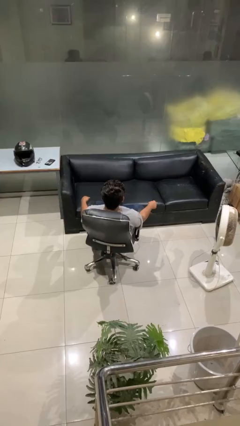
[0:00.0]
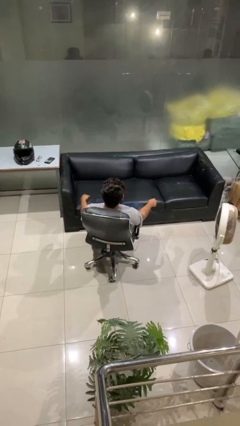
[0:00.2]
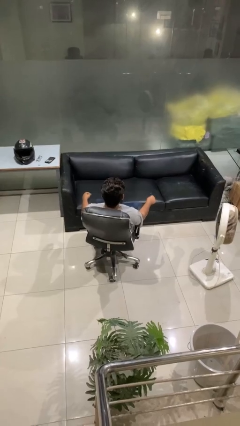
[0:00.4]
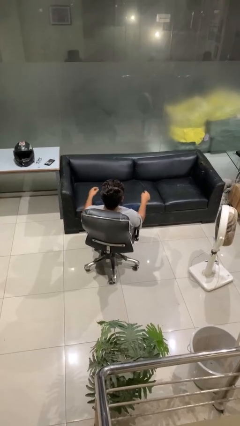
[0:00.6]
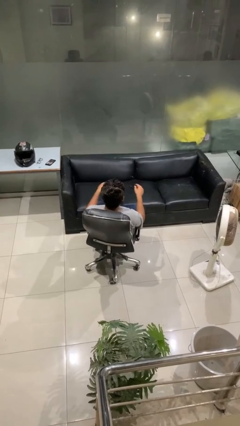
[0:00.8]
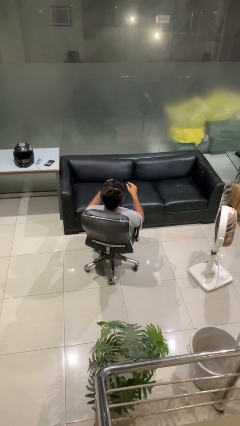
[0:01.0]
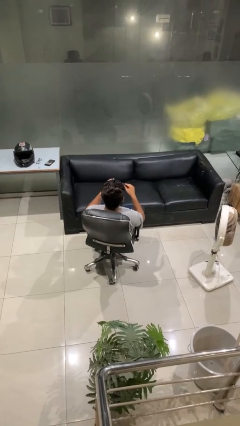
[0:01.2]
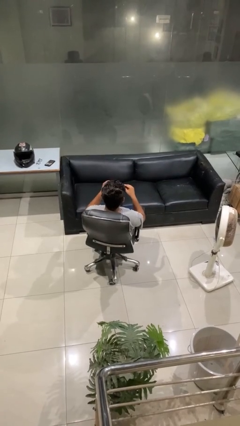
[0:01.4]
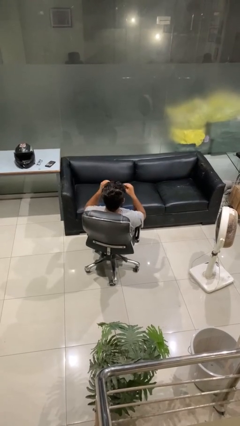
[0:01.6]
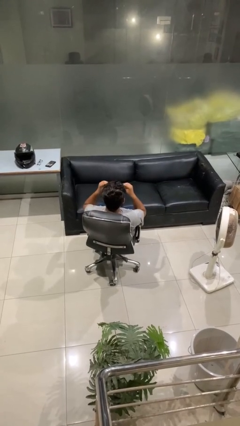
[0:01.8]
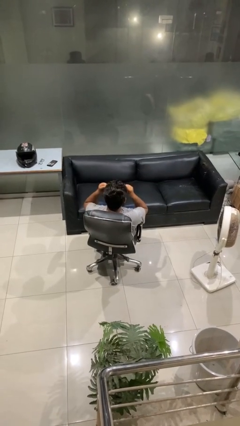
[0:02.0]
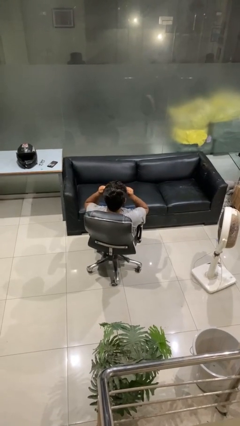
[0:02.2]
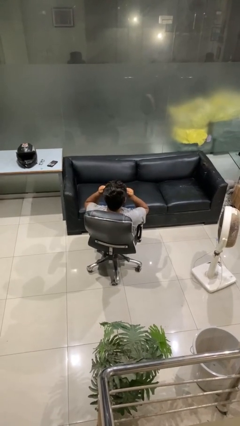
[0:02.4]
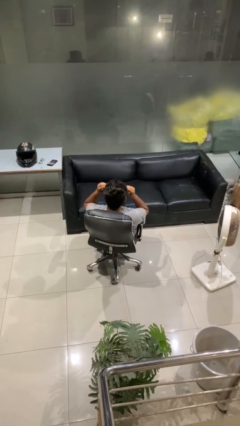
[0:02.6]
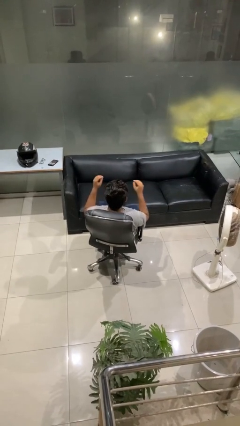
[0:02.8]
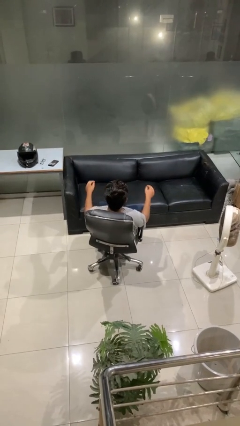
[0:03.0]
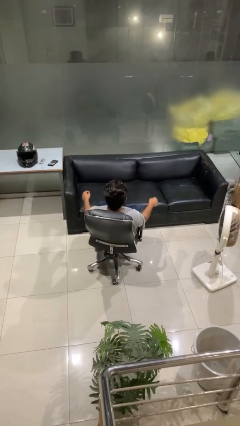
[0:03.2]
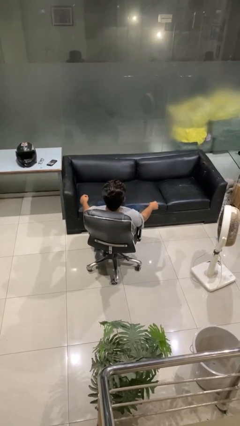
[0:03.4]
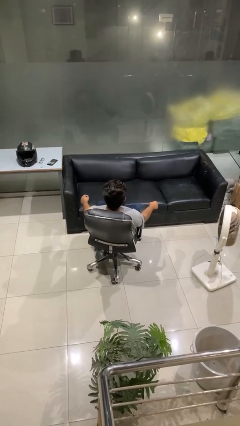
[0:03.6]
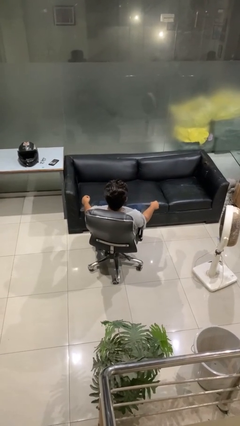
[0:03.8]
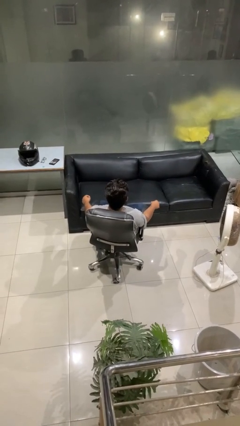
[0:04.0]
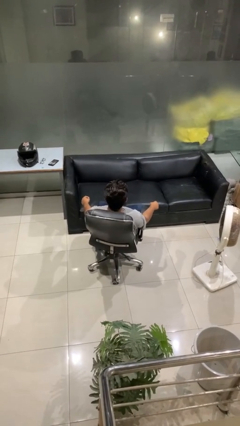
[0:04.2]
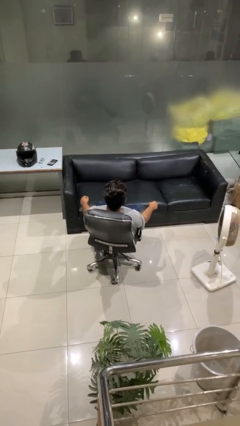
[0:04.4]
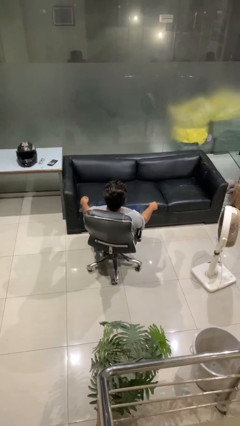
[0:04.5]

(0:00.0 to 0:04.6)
person puts on sunglasses

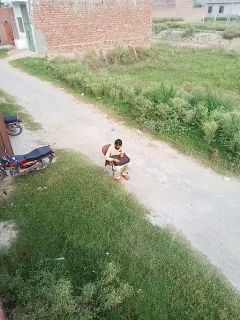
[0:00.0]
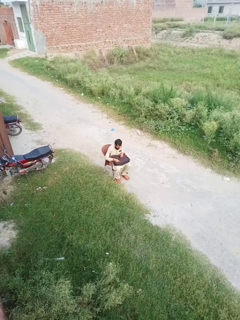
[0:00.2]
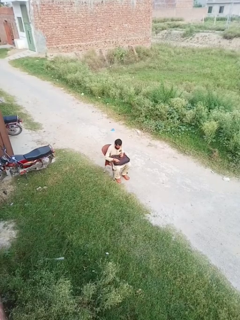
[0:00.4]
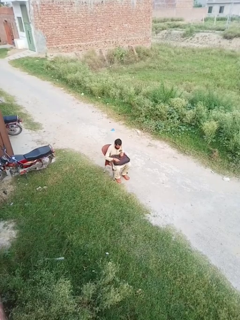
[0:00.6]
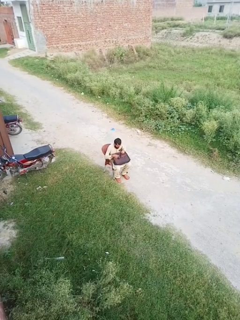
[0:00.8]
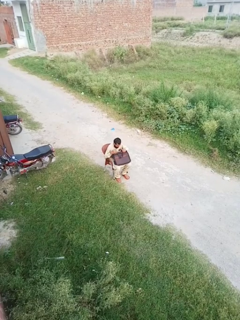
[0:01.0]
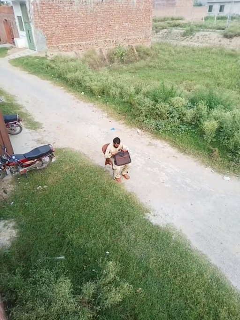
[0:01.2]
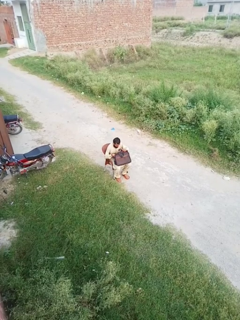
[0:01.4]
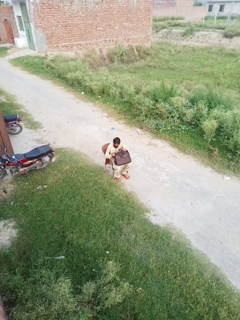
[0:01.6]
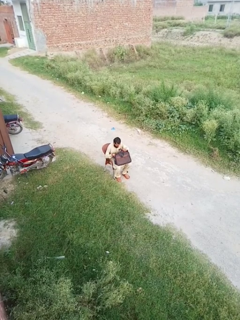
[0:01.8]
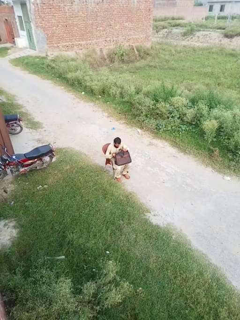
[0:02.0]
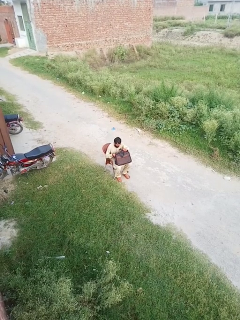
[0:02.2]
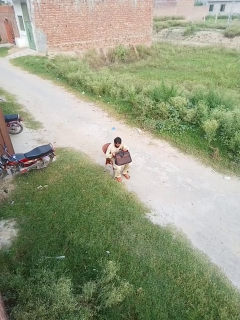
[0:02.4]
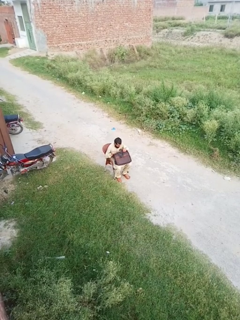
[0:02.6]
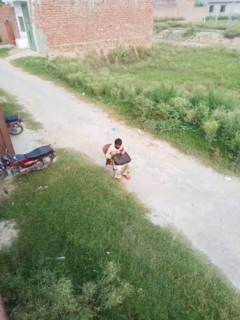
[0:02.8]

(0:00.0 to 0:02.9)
person searches in bag

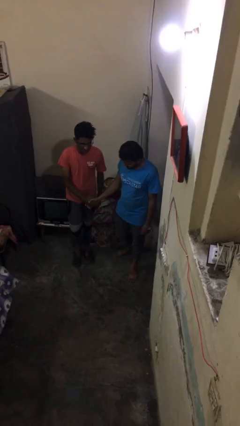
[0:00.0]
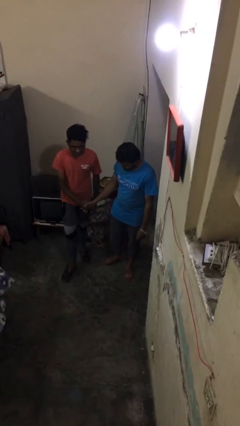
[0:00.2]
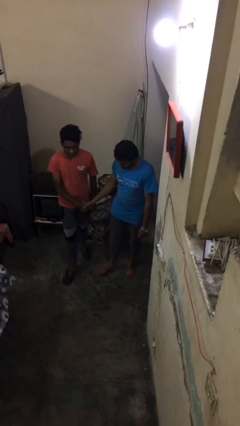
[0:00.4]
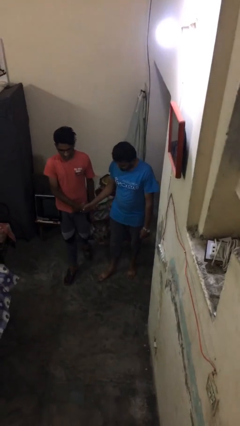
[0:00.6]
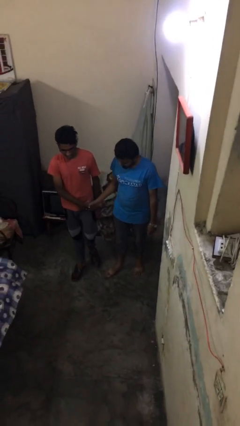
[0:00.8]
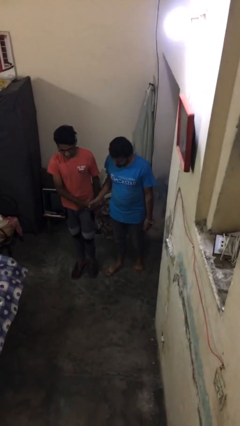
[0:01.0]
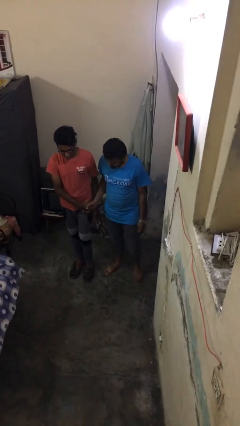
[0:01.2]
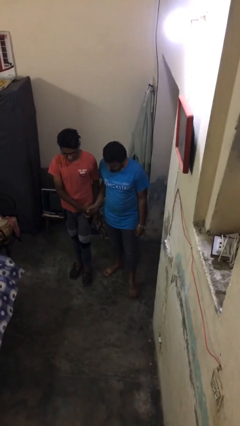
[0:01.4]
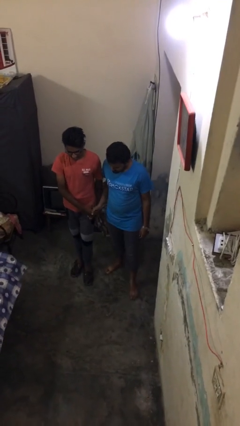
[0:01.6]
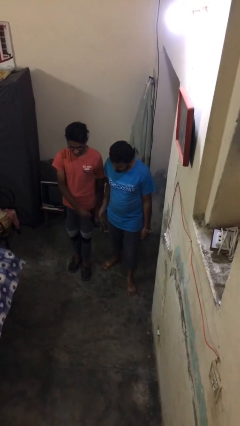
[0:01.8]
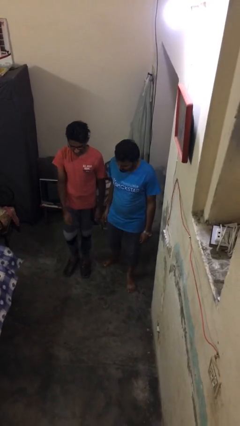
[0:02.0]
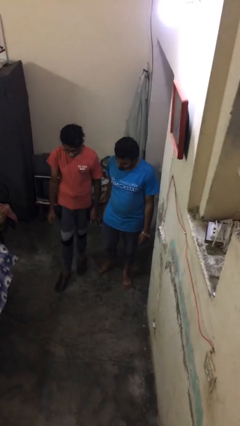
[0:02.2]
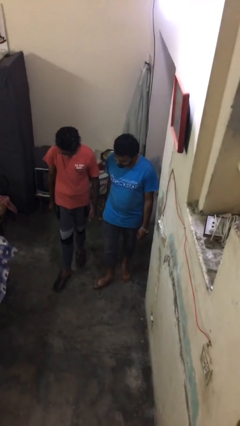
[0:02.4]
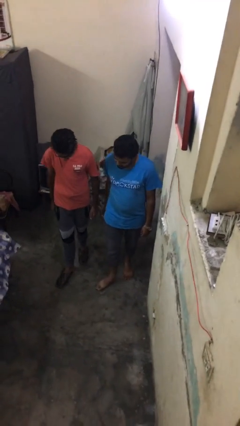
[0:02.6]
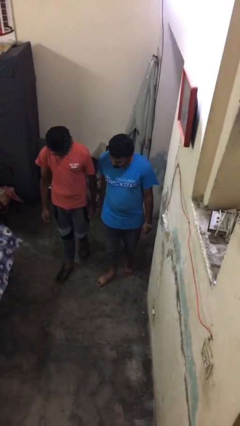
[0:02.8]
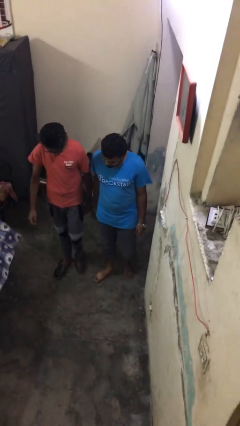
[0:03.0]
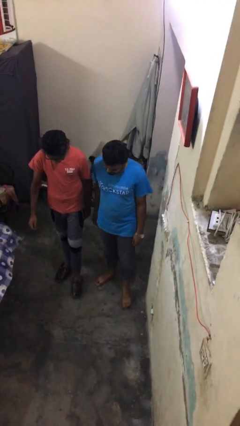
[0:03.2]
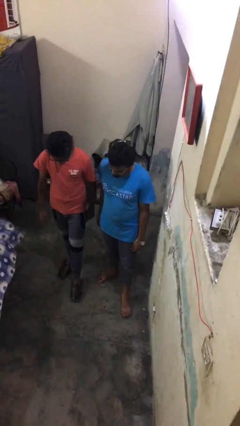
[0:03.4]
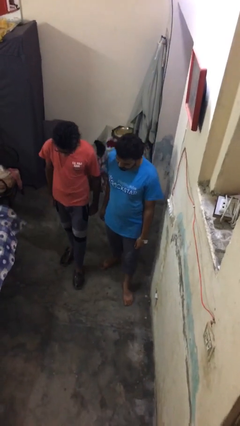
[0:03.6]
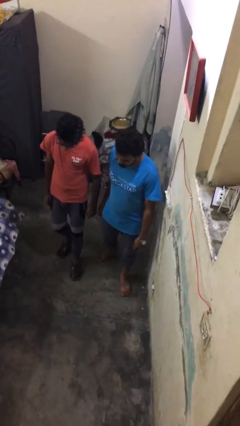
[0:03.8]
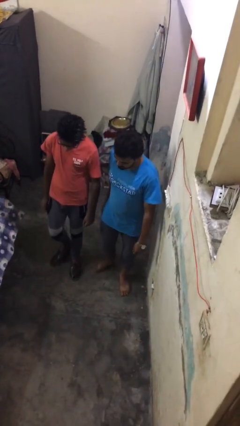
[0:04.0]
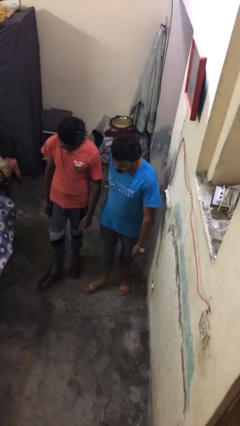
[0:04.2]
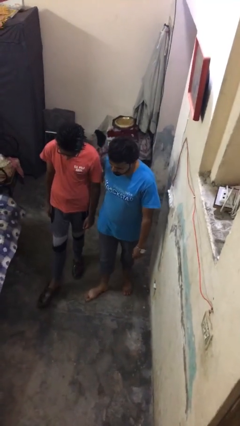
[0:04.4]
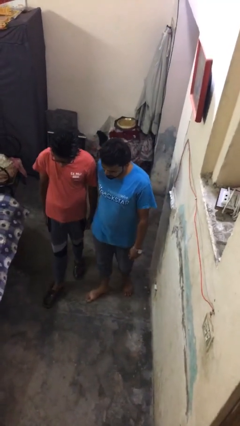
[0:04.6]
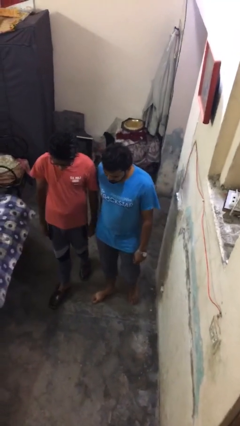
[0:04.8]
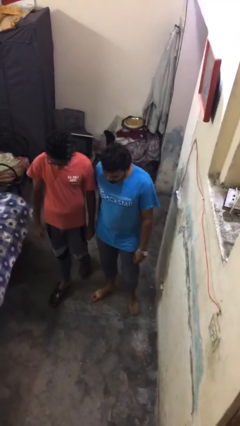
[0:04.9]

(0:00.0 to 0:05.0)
person talks to person

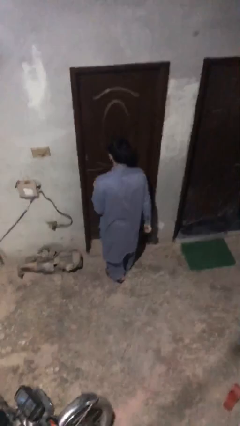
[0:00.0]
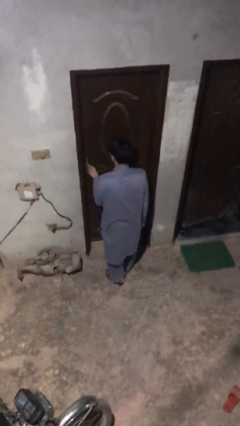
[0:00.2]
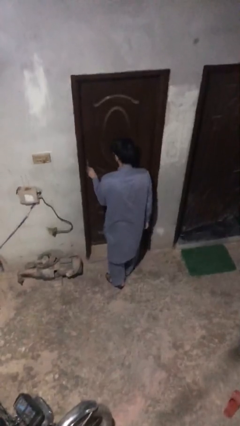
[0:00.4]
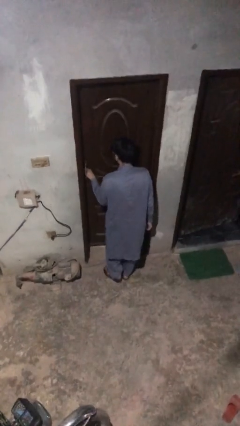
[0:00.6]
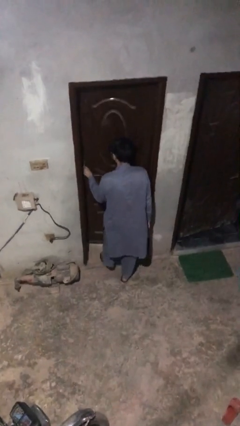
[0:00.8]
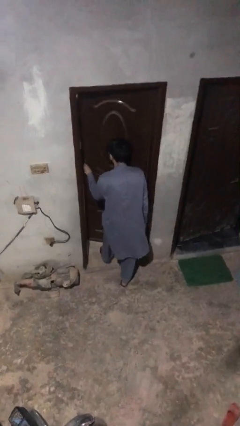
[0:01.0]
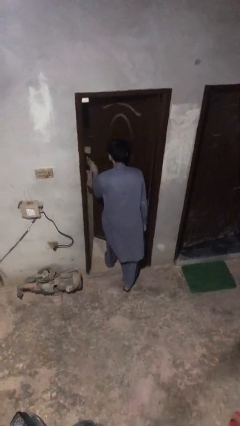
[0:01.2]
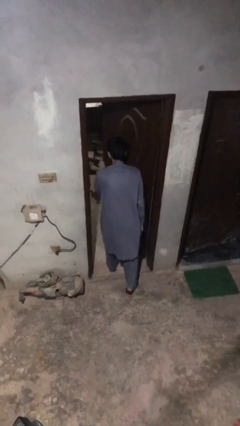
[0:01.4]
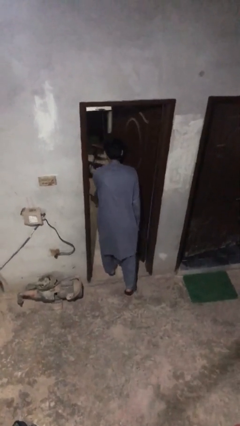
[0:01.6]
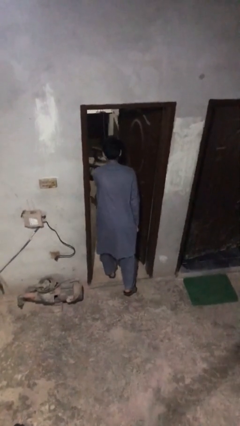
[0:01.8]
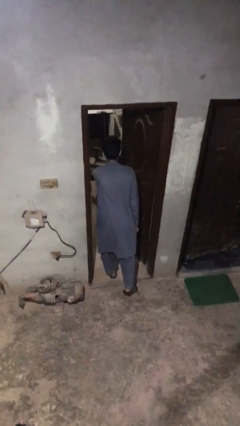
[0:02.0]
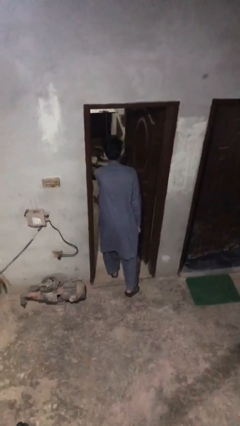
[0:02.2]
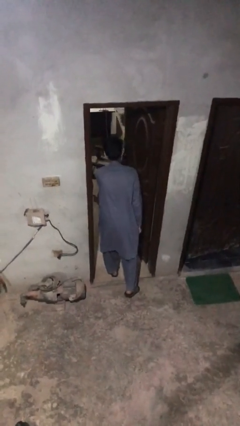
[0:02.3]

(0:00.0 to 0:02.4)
person opens facility door

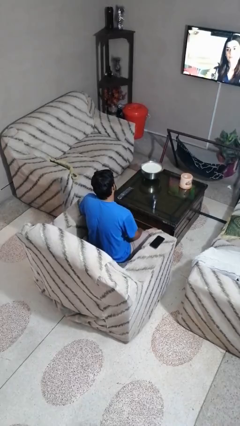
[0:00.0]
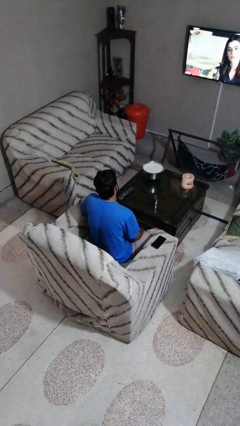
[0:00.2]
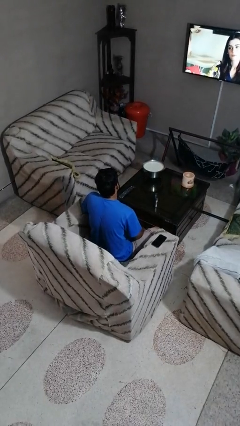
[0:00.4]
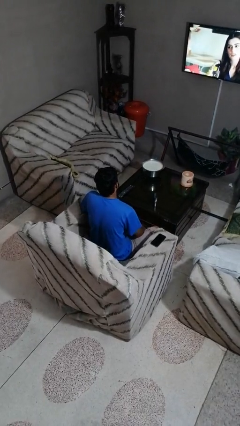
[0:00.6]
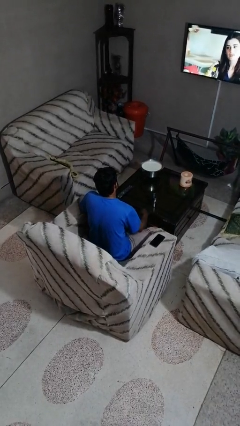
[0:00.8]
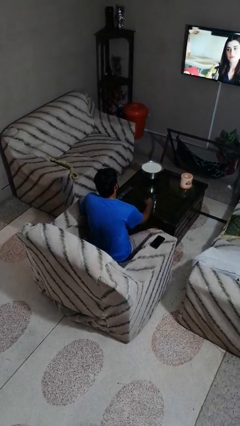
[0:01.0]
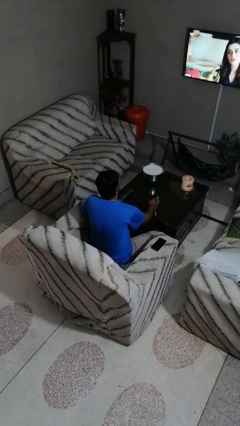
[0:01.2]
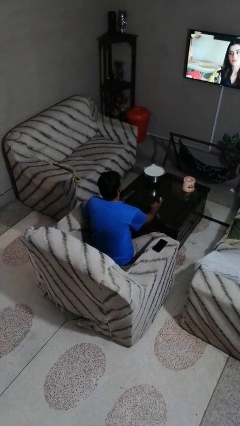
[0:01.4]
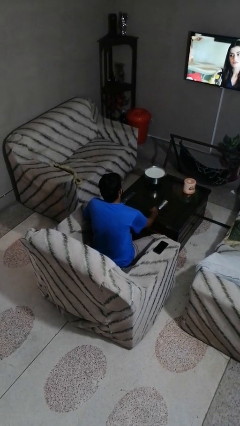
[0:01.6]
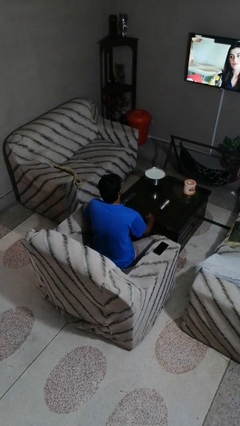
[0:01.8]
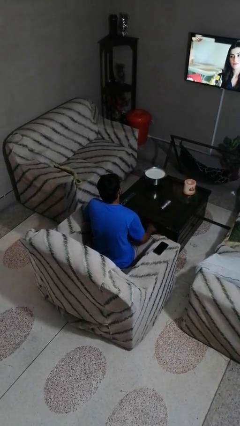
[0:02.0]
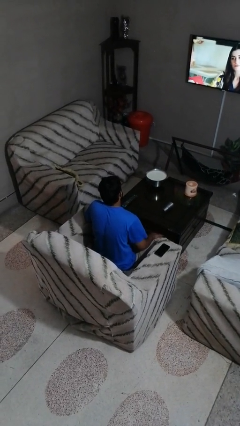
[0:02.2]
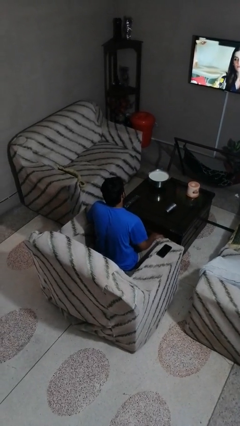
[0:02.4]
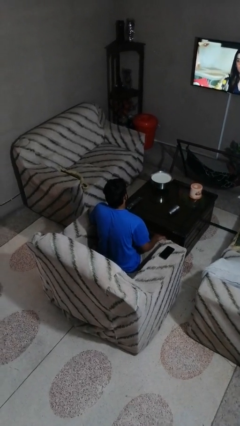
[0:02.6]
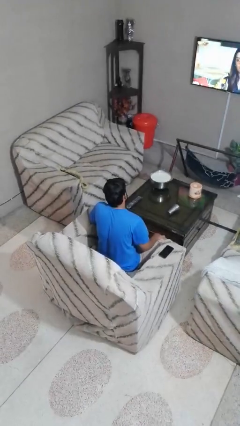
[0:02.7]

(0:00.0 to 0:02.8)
person knocks over glass

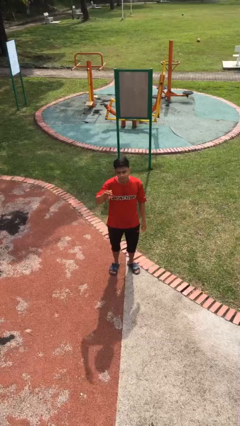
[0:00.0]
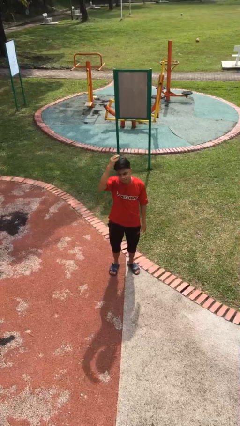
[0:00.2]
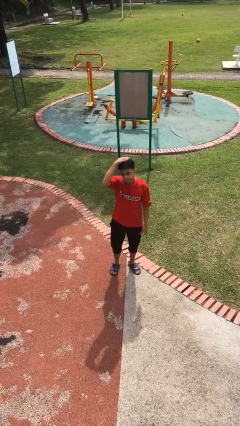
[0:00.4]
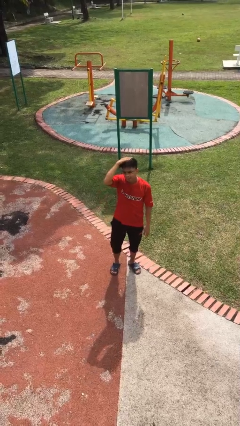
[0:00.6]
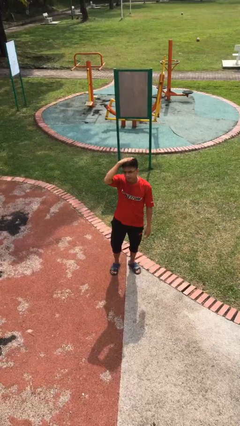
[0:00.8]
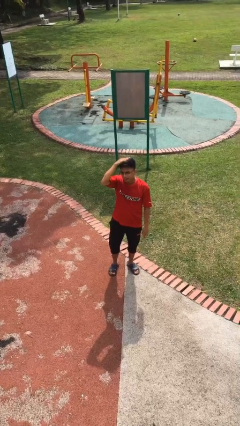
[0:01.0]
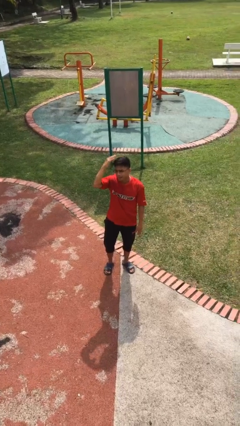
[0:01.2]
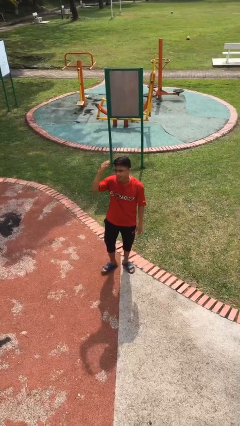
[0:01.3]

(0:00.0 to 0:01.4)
person pats head
